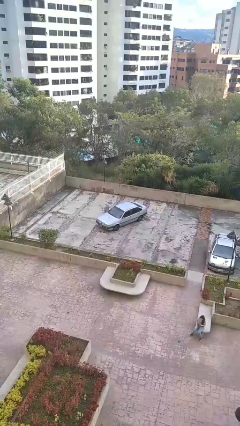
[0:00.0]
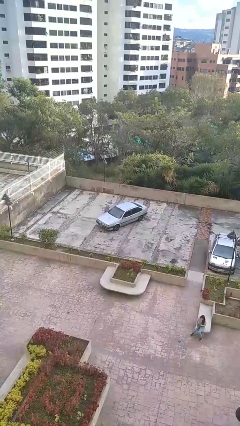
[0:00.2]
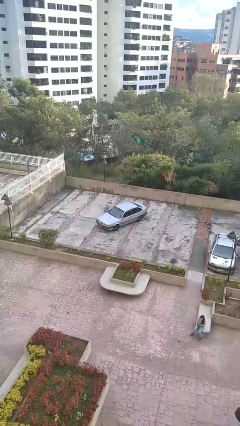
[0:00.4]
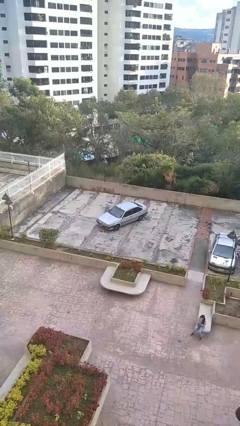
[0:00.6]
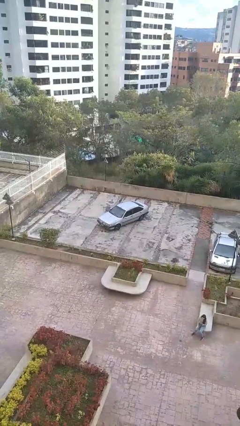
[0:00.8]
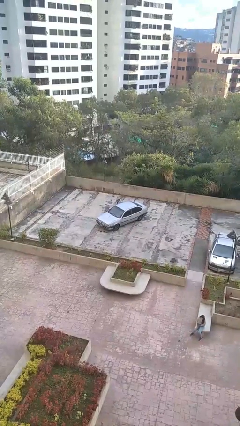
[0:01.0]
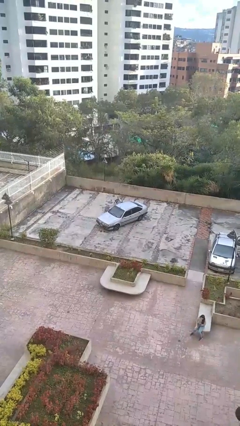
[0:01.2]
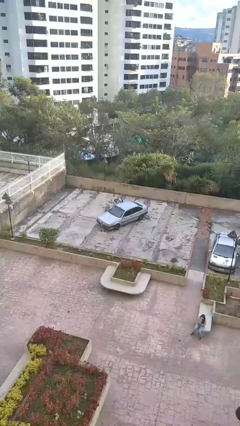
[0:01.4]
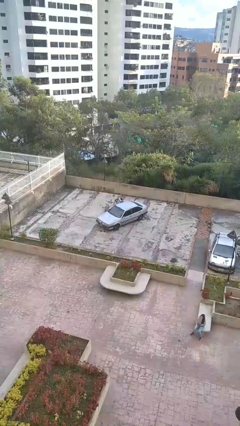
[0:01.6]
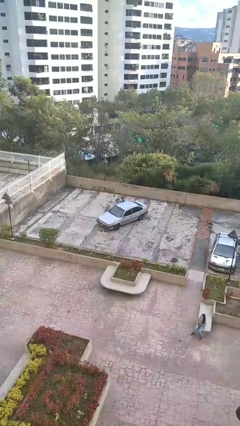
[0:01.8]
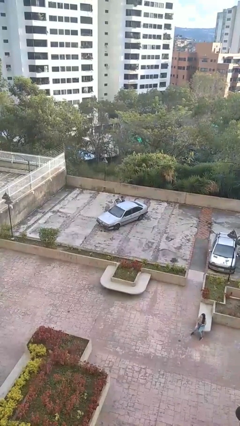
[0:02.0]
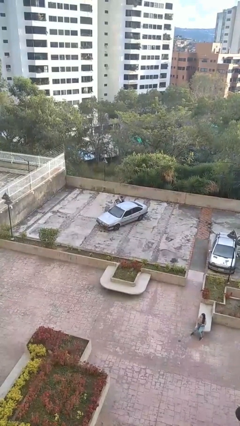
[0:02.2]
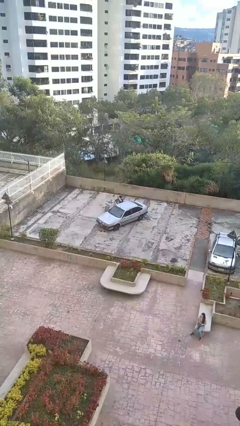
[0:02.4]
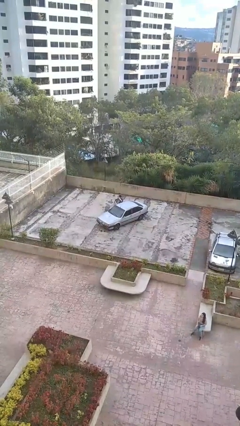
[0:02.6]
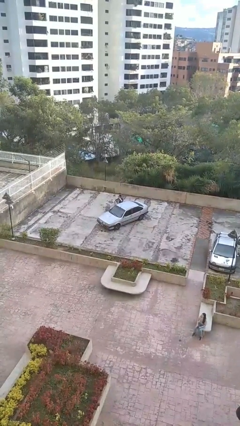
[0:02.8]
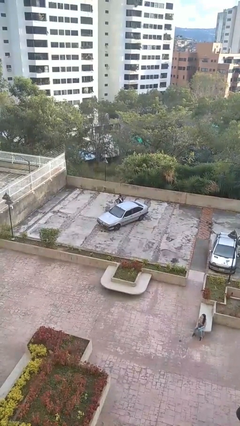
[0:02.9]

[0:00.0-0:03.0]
car drops off person

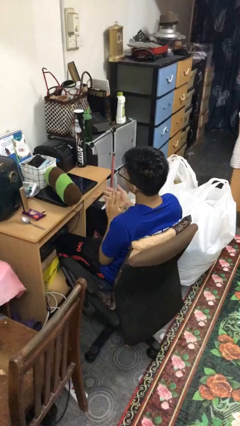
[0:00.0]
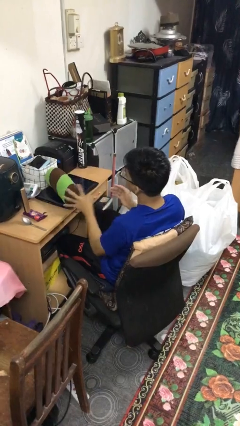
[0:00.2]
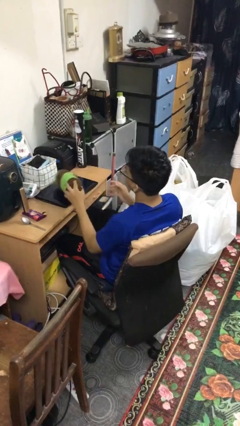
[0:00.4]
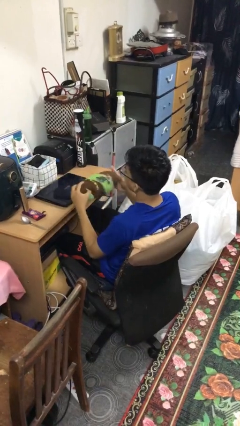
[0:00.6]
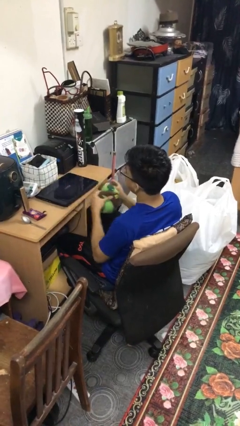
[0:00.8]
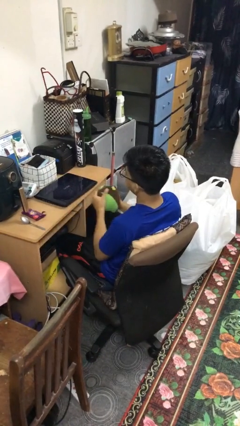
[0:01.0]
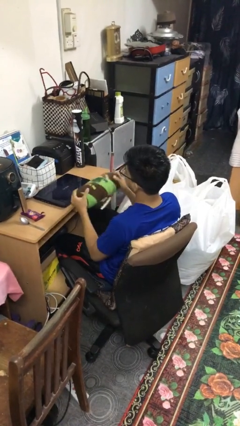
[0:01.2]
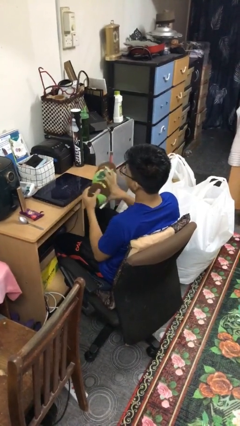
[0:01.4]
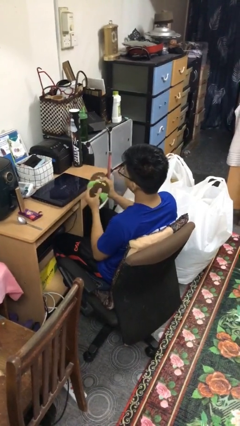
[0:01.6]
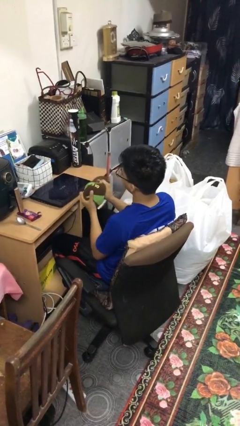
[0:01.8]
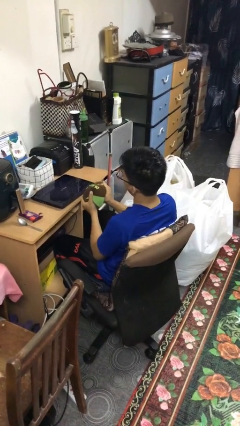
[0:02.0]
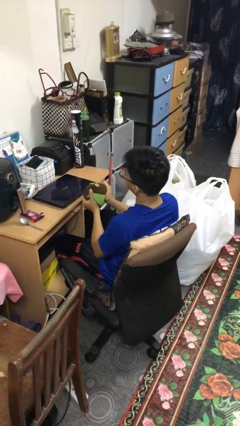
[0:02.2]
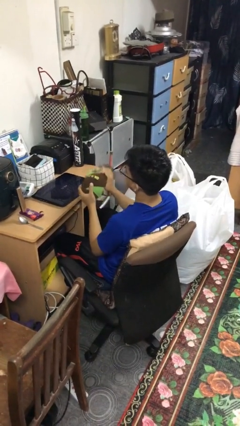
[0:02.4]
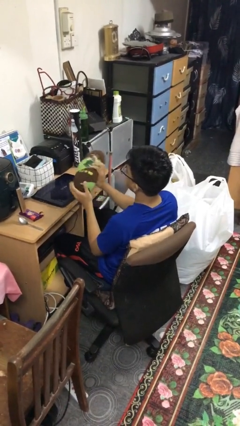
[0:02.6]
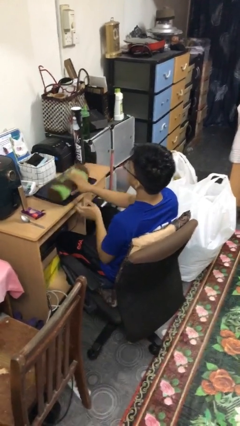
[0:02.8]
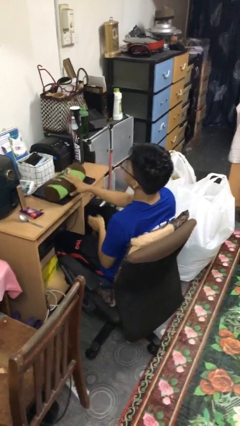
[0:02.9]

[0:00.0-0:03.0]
person squeezes object

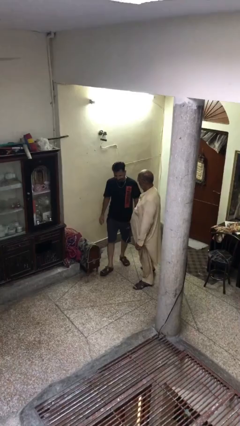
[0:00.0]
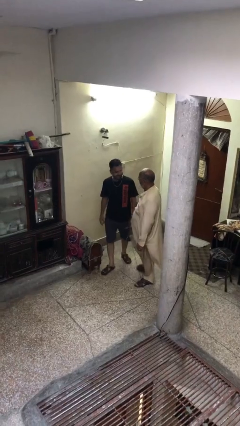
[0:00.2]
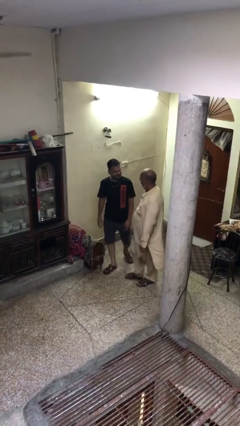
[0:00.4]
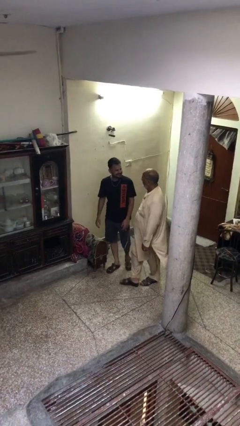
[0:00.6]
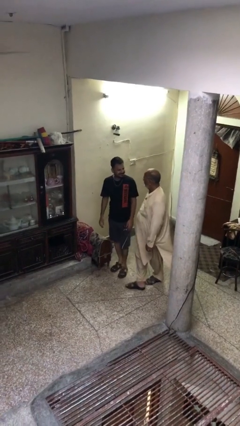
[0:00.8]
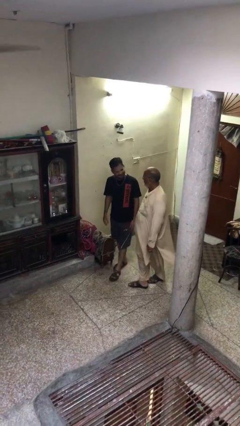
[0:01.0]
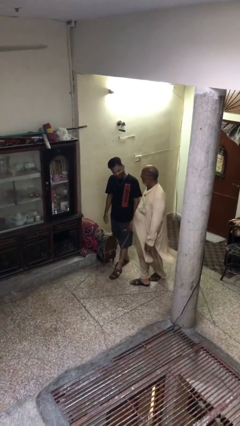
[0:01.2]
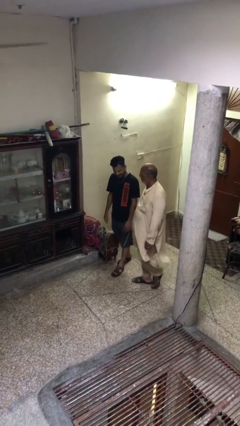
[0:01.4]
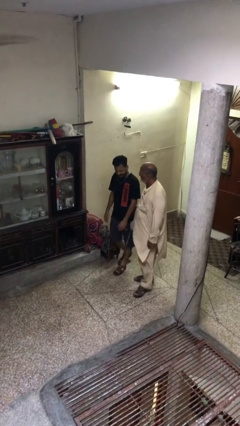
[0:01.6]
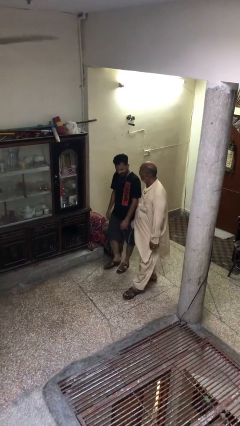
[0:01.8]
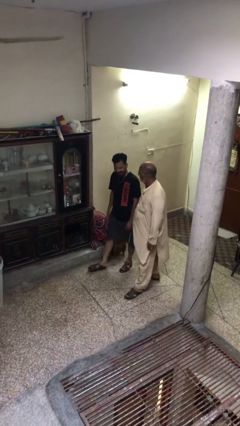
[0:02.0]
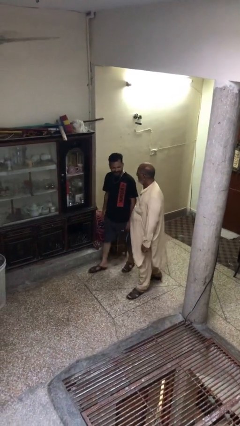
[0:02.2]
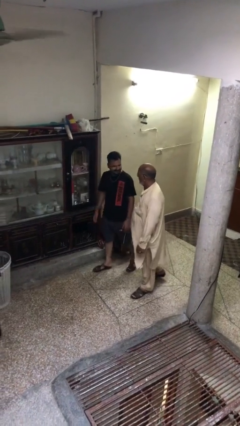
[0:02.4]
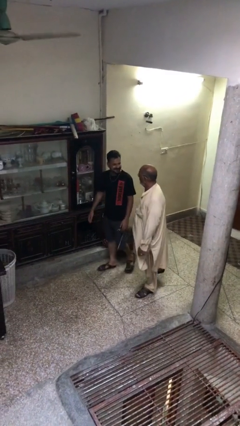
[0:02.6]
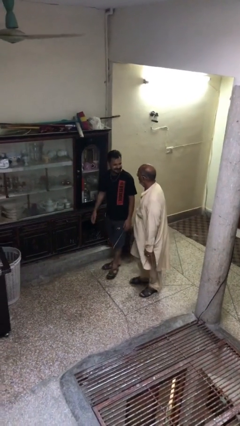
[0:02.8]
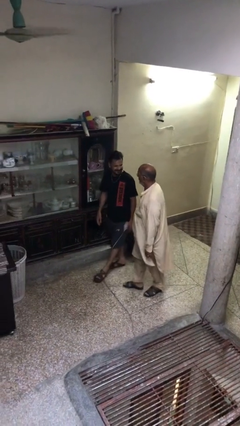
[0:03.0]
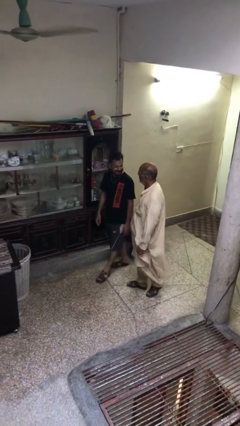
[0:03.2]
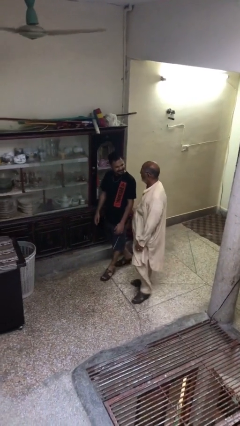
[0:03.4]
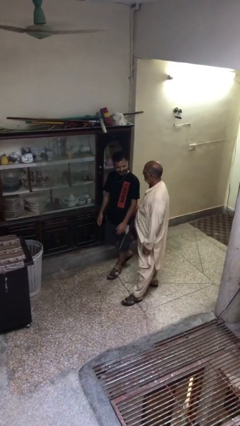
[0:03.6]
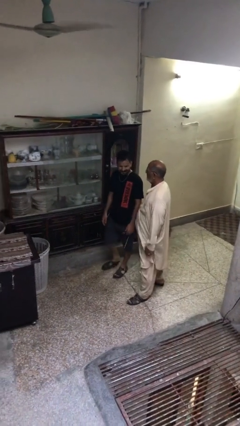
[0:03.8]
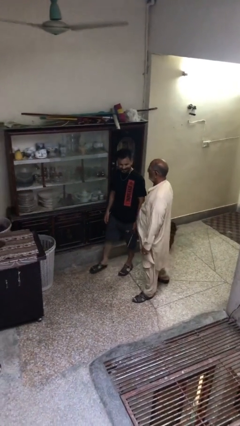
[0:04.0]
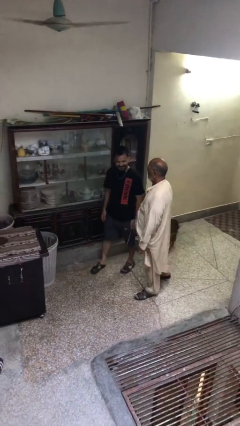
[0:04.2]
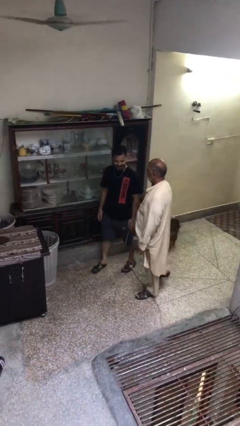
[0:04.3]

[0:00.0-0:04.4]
person talks to person

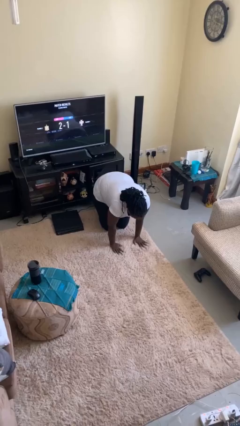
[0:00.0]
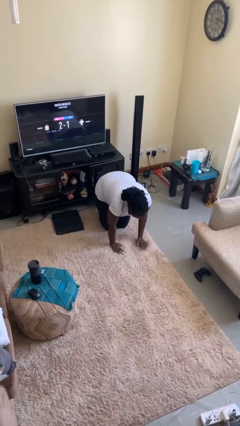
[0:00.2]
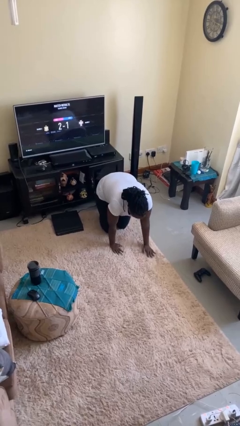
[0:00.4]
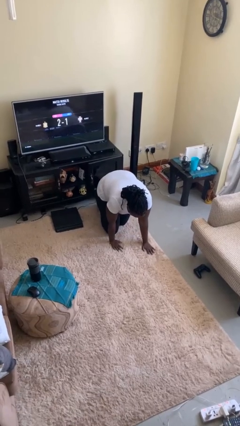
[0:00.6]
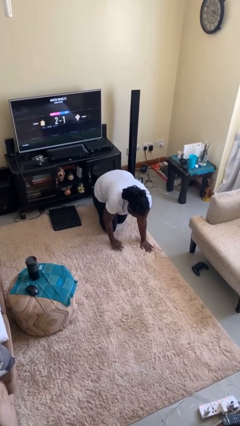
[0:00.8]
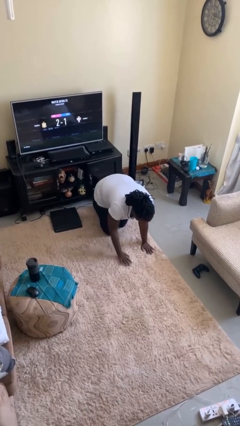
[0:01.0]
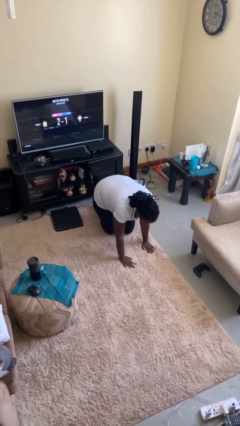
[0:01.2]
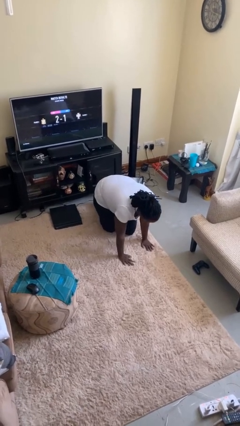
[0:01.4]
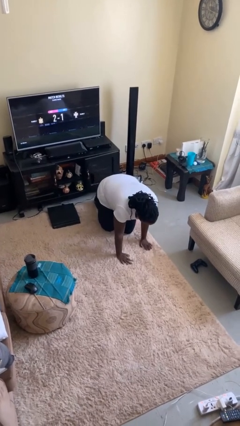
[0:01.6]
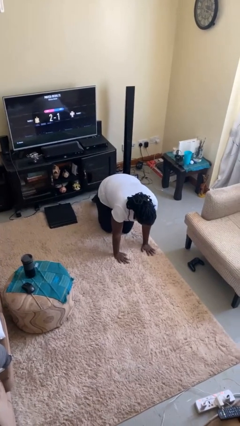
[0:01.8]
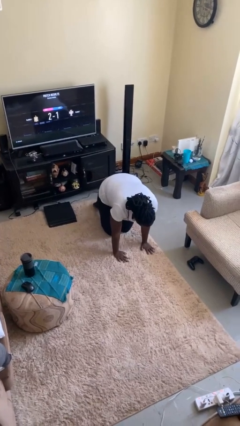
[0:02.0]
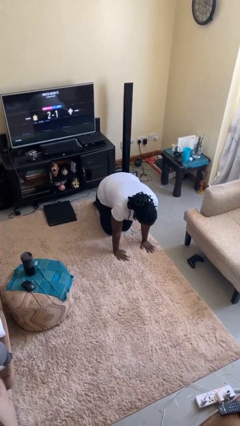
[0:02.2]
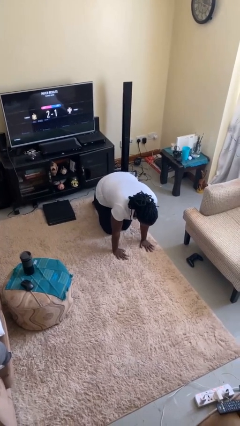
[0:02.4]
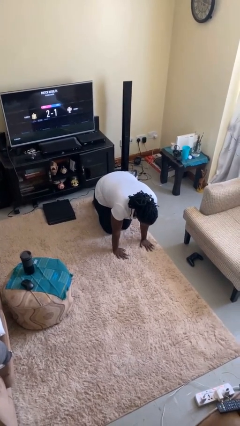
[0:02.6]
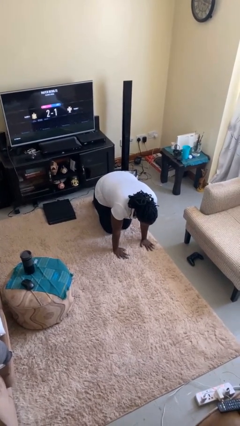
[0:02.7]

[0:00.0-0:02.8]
person crawls

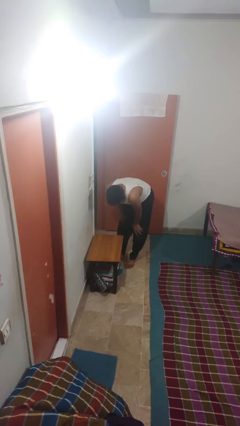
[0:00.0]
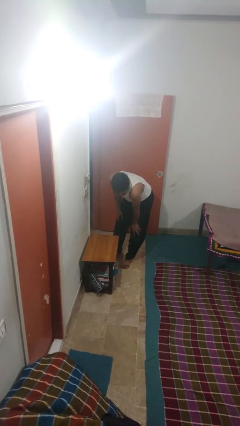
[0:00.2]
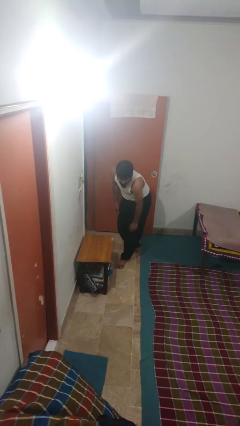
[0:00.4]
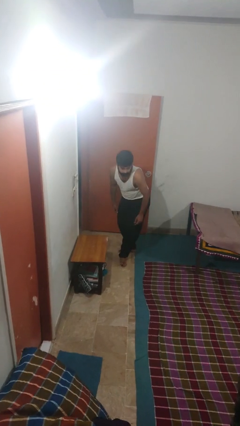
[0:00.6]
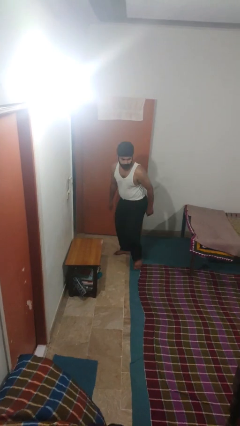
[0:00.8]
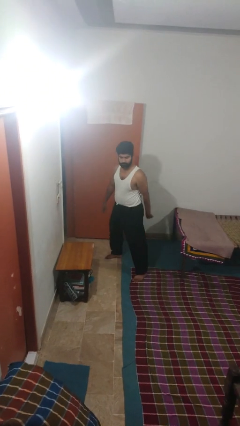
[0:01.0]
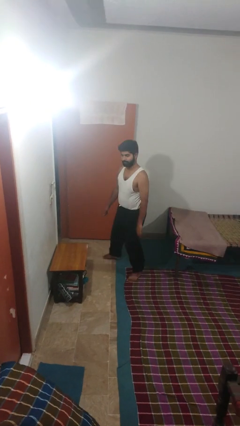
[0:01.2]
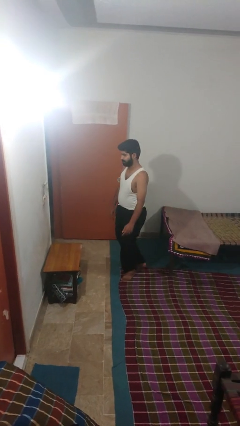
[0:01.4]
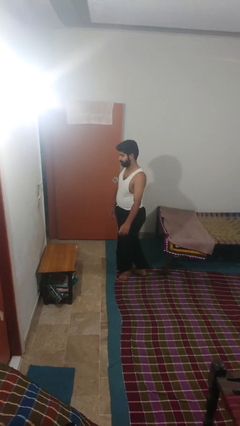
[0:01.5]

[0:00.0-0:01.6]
person bumps into table

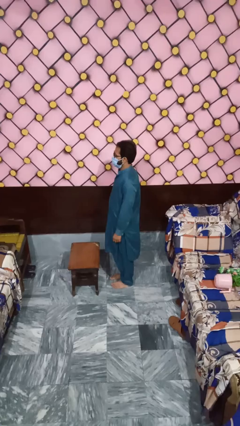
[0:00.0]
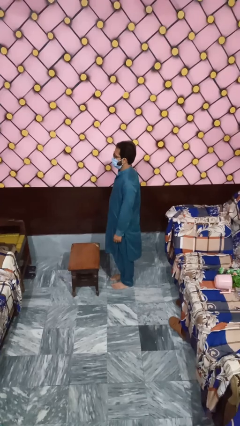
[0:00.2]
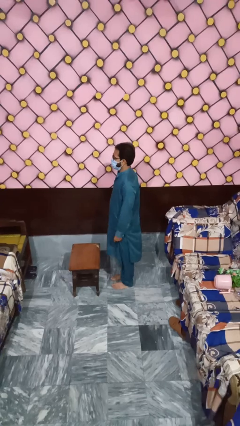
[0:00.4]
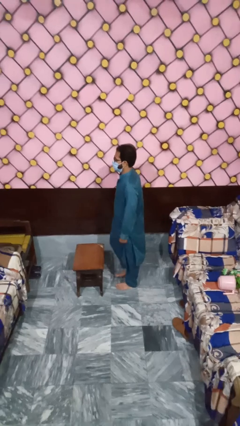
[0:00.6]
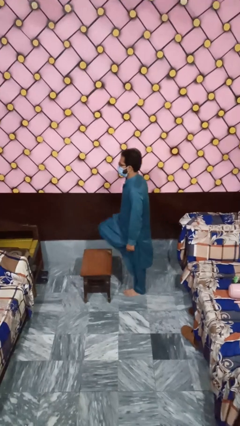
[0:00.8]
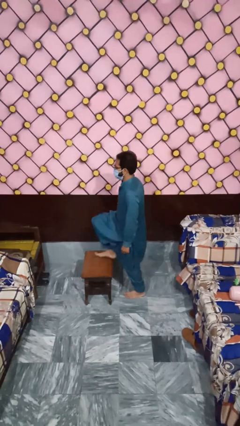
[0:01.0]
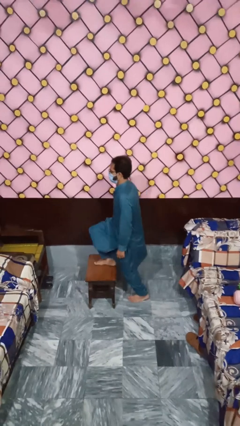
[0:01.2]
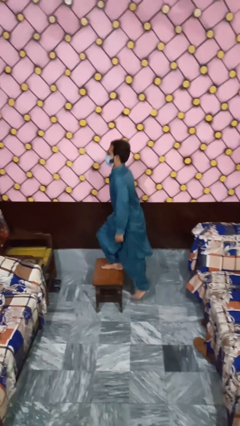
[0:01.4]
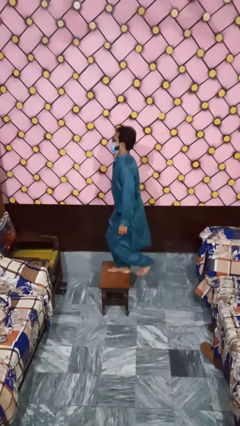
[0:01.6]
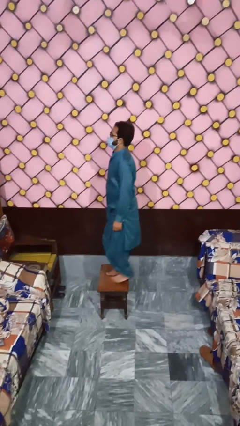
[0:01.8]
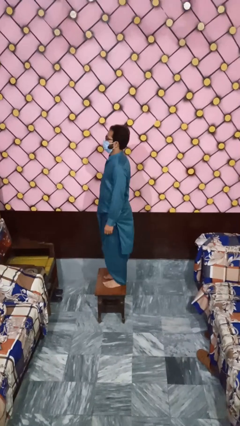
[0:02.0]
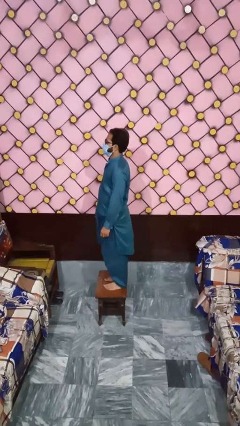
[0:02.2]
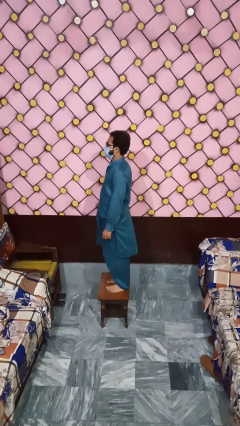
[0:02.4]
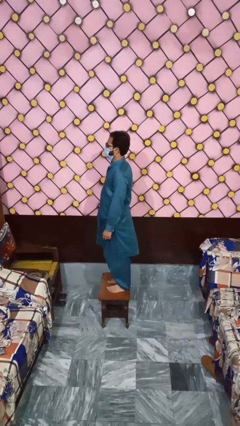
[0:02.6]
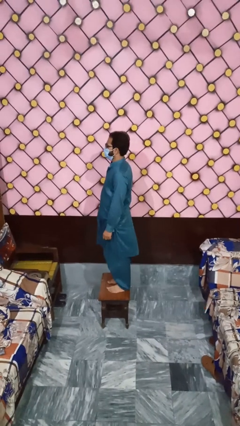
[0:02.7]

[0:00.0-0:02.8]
person climbs on table
